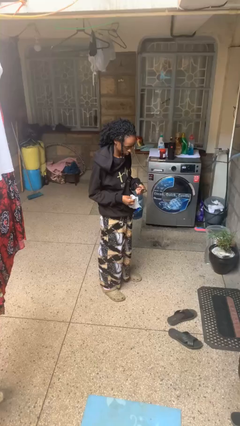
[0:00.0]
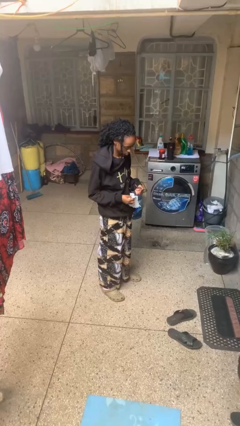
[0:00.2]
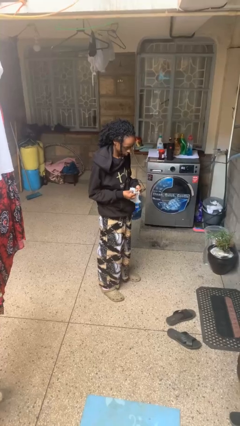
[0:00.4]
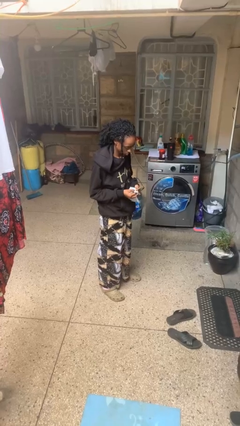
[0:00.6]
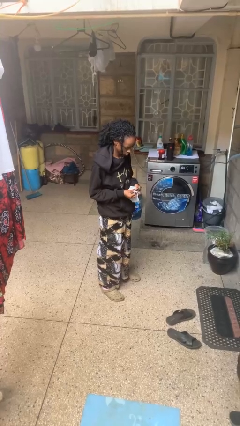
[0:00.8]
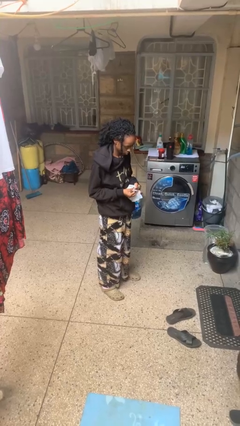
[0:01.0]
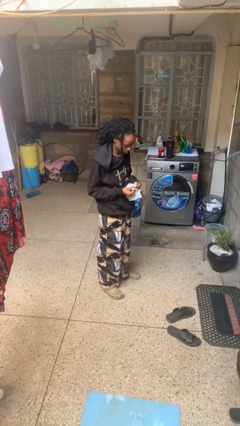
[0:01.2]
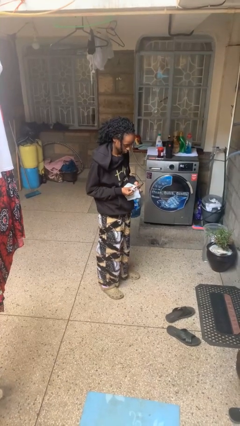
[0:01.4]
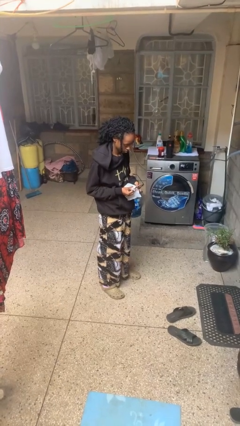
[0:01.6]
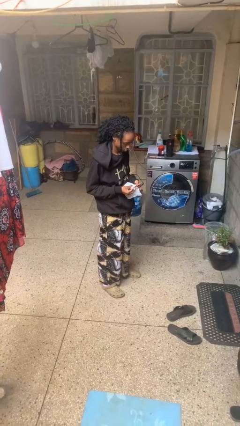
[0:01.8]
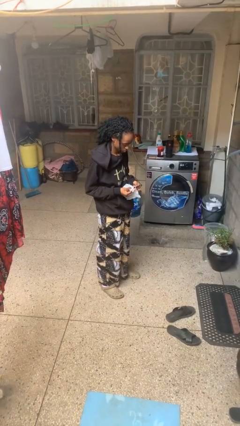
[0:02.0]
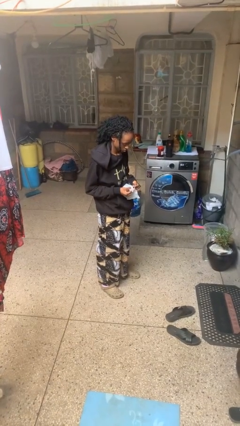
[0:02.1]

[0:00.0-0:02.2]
person cleans eyeglasses

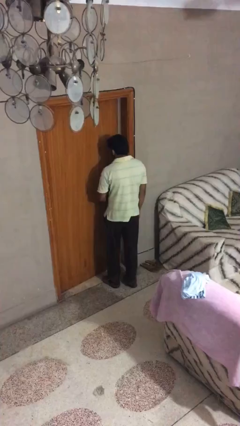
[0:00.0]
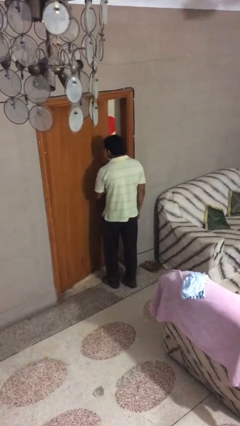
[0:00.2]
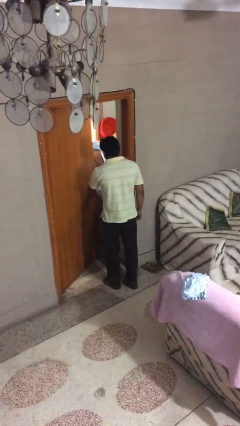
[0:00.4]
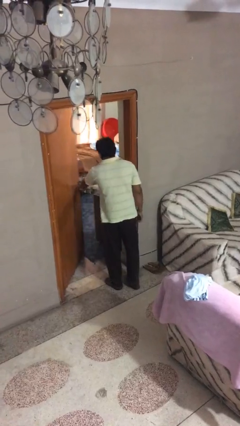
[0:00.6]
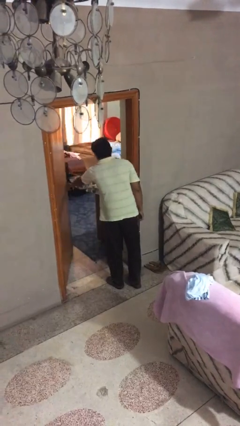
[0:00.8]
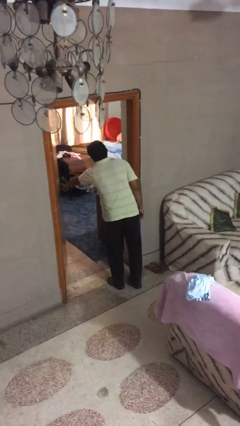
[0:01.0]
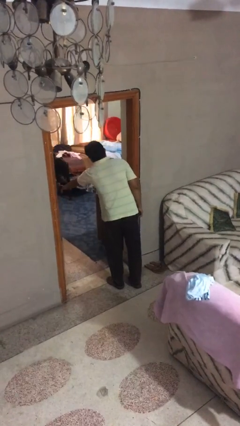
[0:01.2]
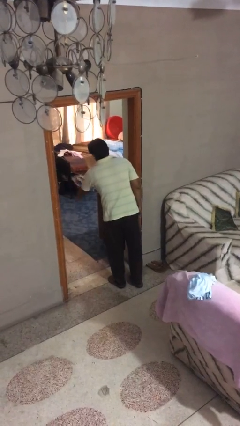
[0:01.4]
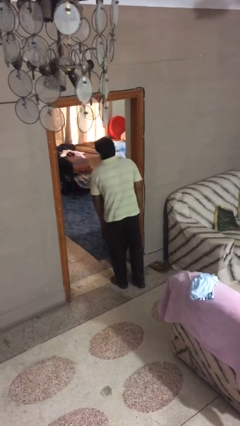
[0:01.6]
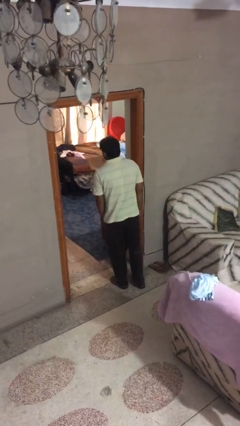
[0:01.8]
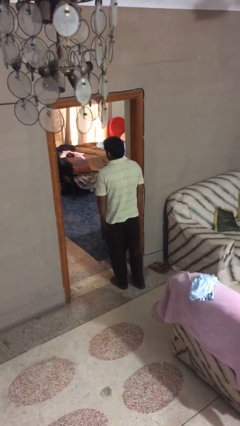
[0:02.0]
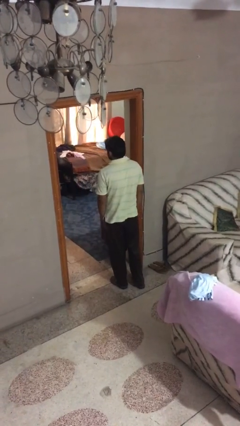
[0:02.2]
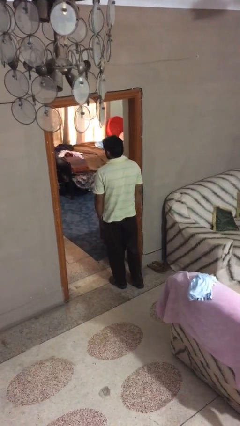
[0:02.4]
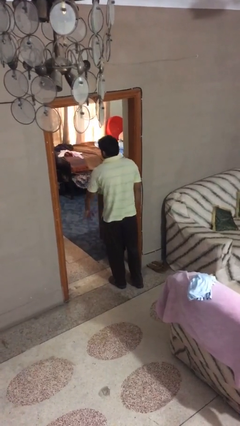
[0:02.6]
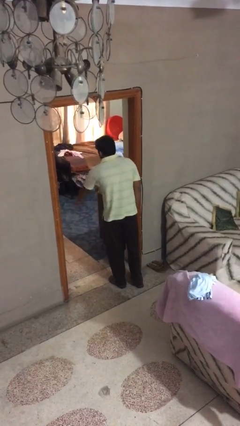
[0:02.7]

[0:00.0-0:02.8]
person opens facility door

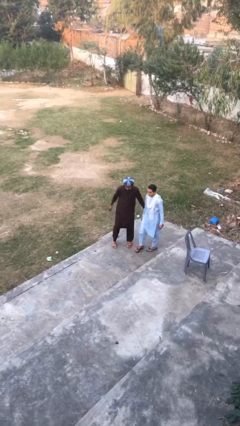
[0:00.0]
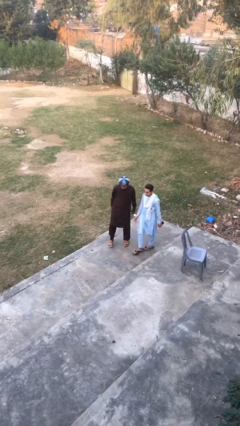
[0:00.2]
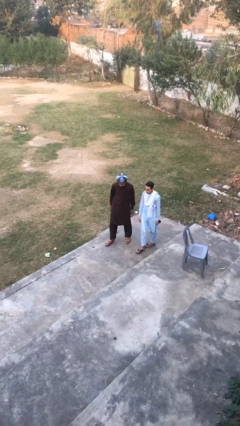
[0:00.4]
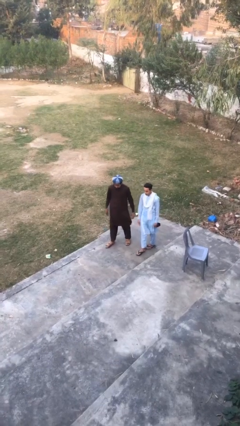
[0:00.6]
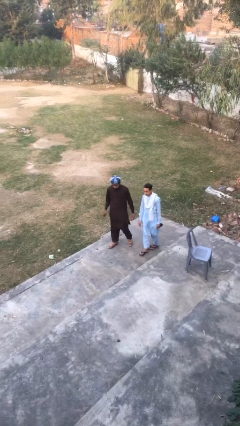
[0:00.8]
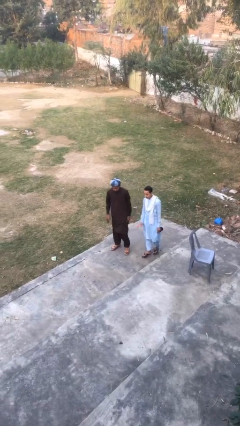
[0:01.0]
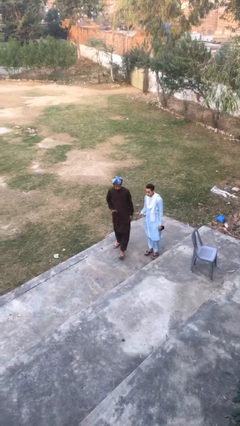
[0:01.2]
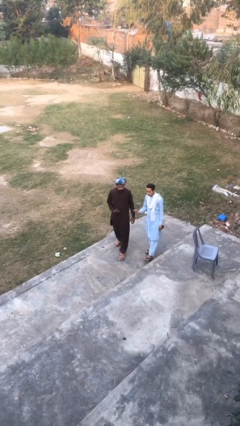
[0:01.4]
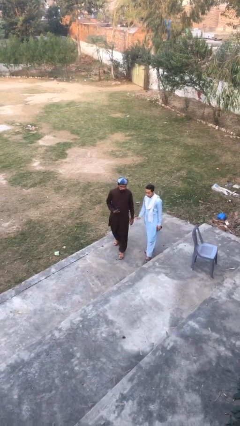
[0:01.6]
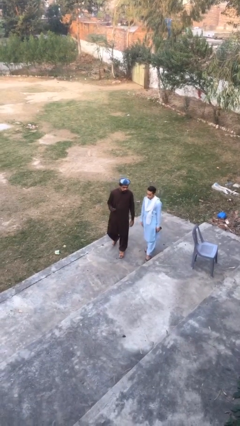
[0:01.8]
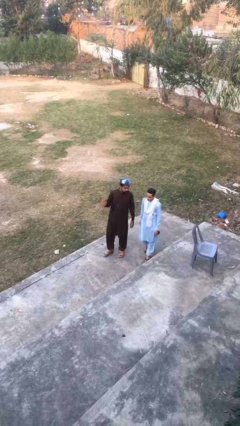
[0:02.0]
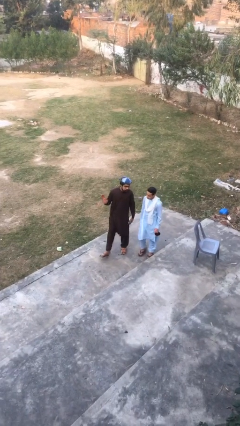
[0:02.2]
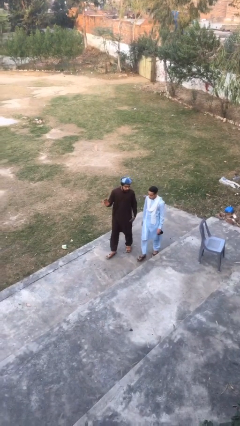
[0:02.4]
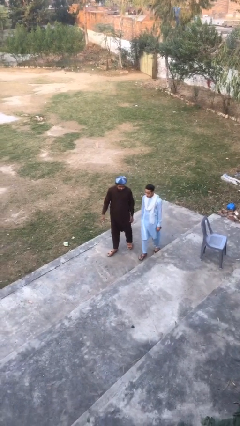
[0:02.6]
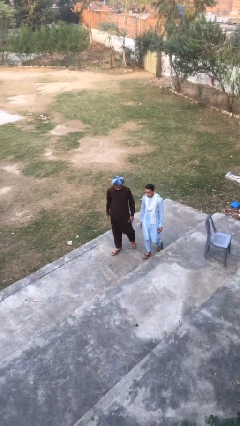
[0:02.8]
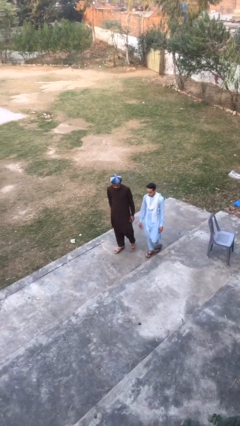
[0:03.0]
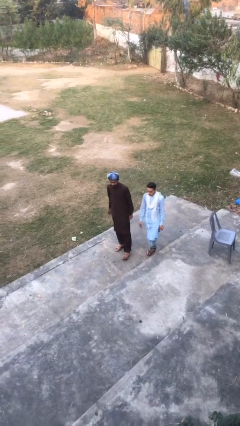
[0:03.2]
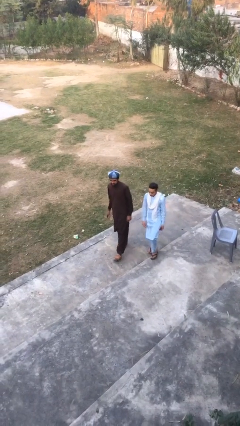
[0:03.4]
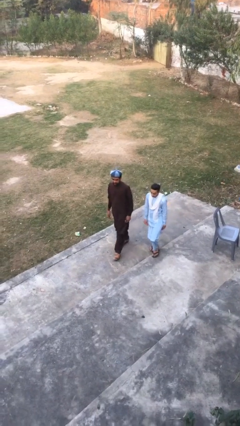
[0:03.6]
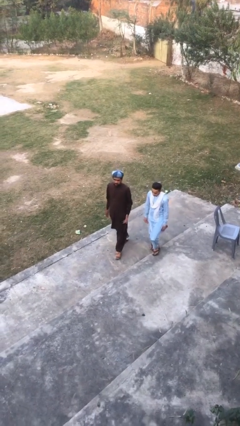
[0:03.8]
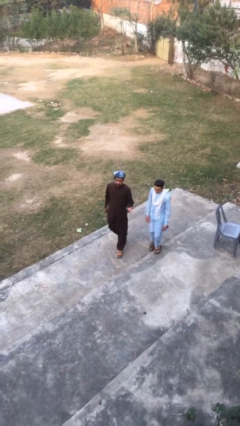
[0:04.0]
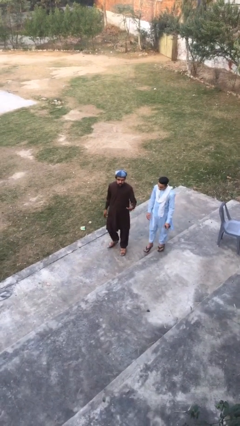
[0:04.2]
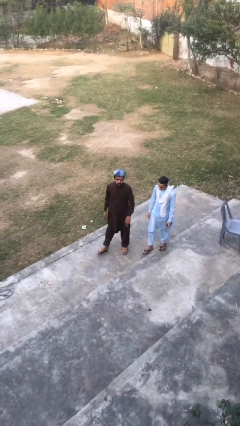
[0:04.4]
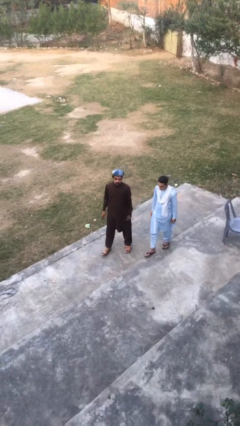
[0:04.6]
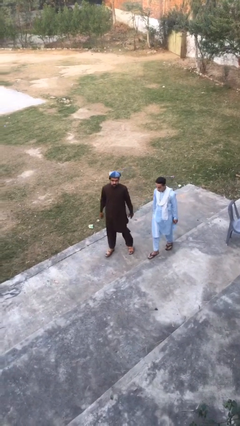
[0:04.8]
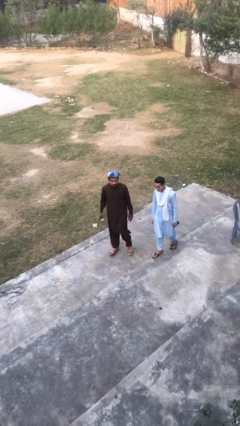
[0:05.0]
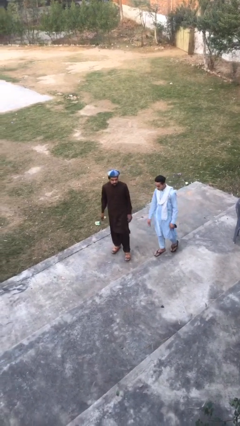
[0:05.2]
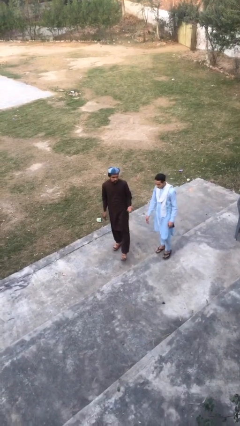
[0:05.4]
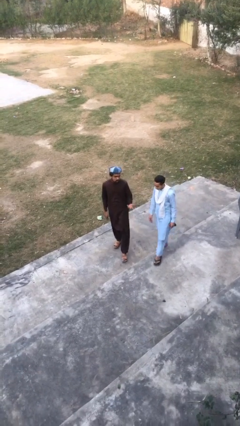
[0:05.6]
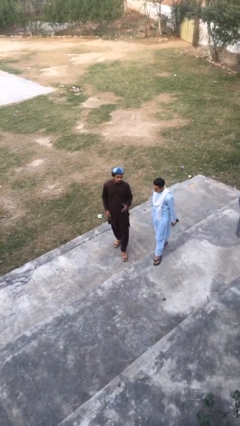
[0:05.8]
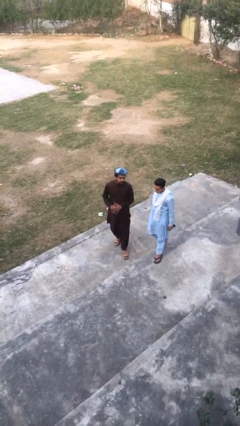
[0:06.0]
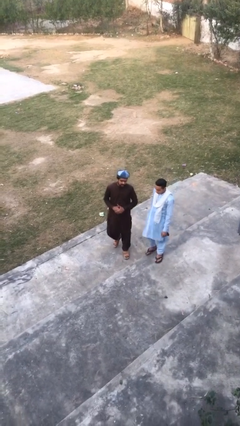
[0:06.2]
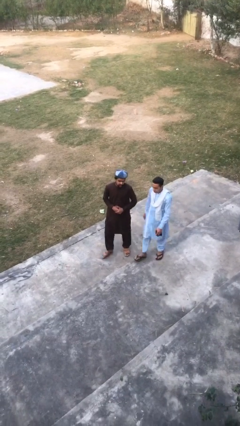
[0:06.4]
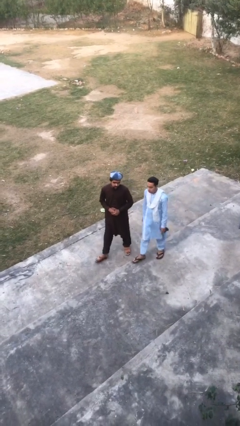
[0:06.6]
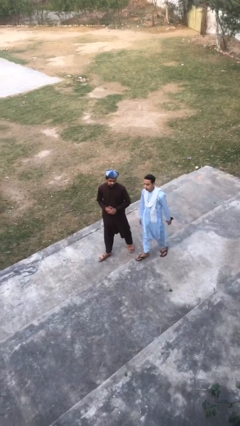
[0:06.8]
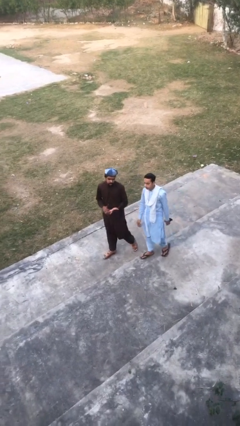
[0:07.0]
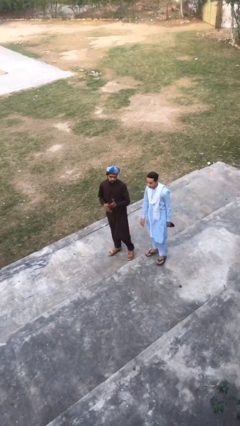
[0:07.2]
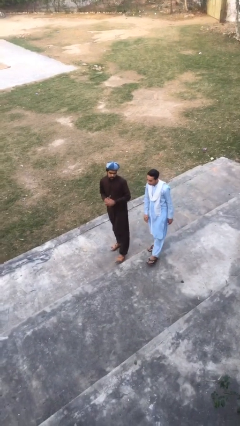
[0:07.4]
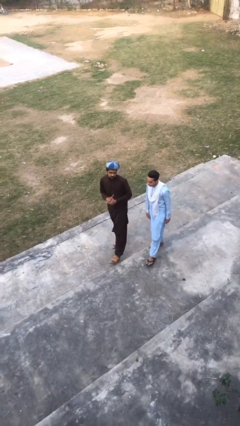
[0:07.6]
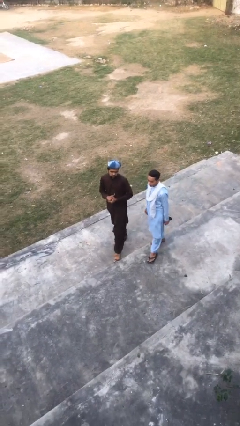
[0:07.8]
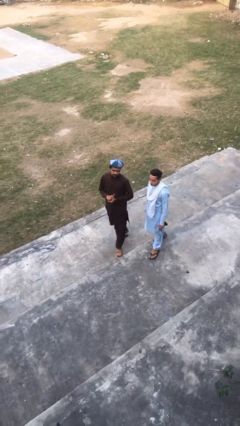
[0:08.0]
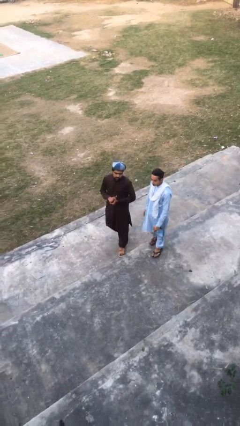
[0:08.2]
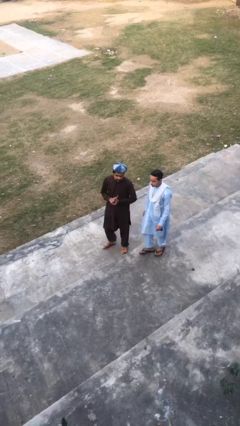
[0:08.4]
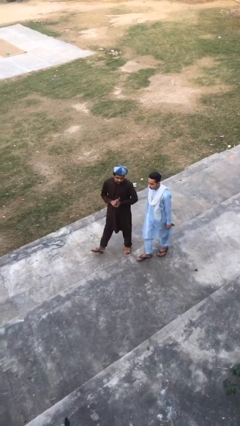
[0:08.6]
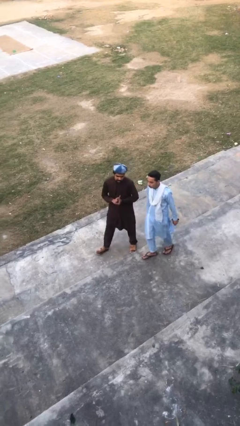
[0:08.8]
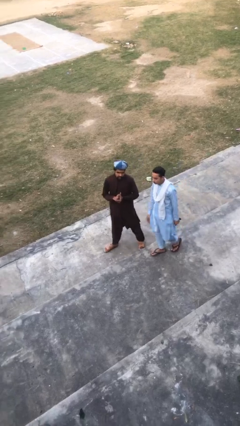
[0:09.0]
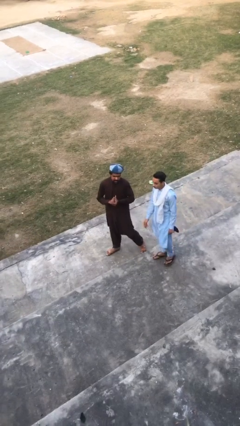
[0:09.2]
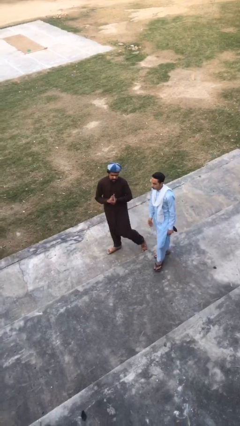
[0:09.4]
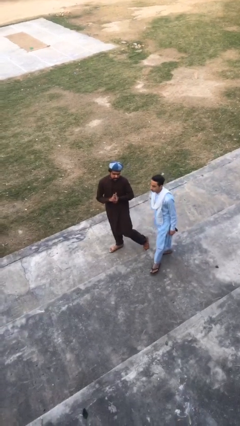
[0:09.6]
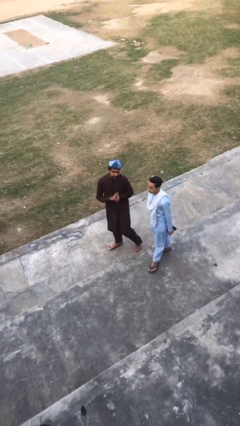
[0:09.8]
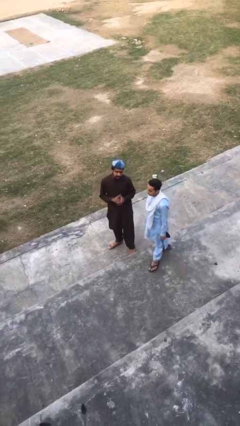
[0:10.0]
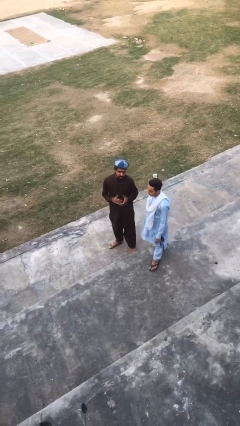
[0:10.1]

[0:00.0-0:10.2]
person talks to person

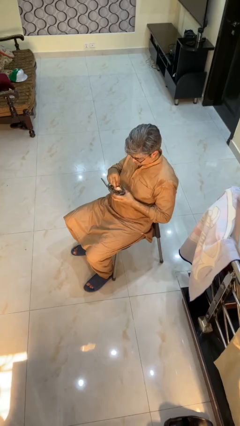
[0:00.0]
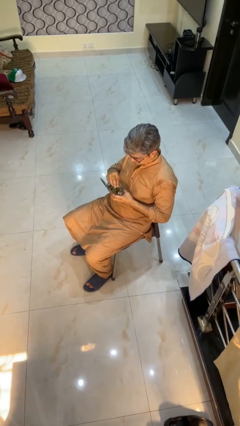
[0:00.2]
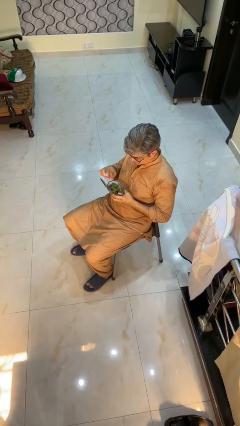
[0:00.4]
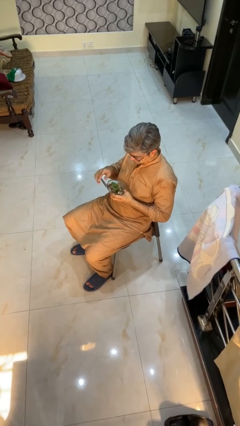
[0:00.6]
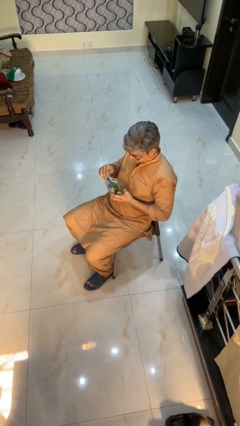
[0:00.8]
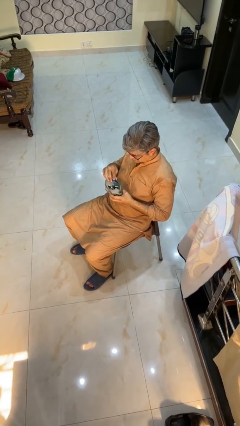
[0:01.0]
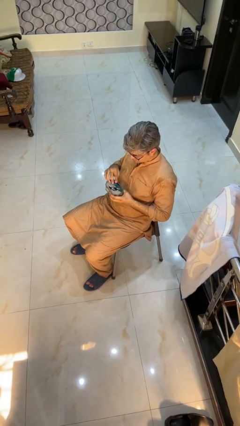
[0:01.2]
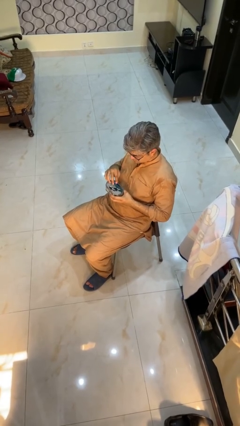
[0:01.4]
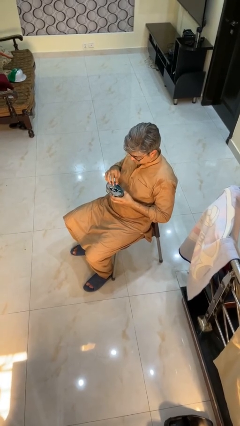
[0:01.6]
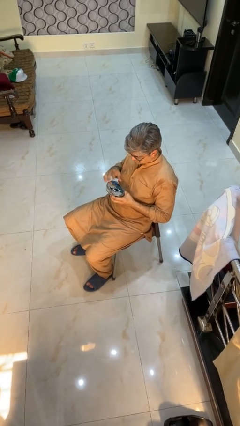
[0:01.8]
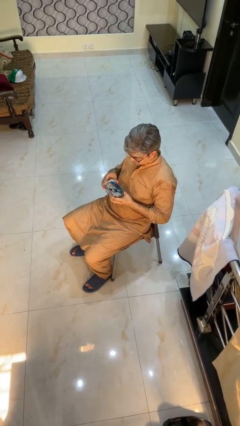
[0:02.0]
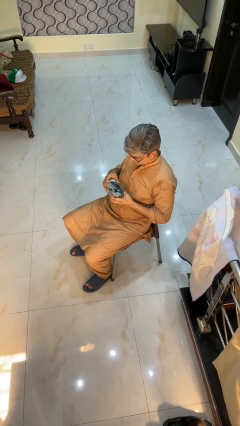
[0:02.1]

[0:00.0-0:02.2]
person closes jewelry box

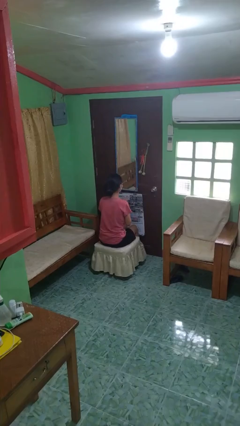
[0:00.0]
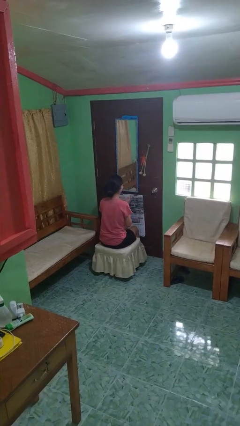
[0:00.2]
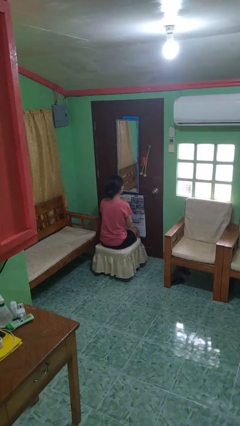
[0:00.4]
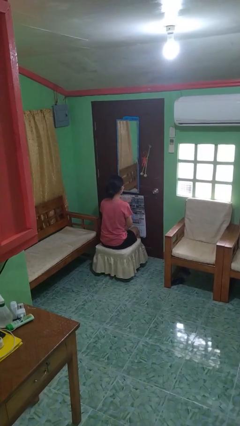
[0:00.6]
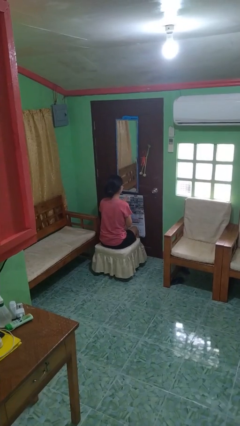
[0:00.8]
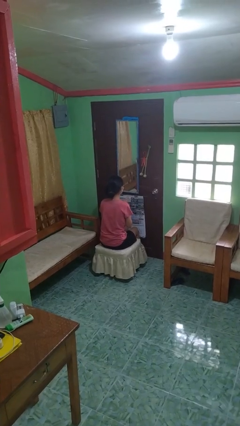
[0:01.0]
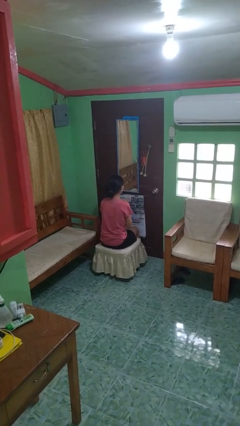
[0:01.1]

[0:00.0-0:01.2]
person claps hands
